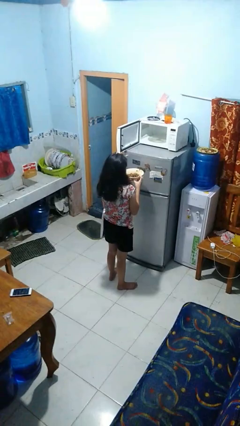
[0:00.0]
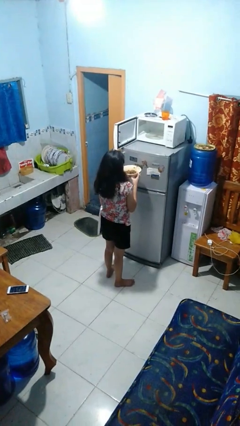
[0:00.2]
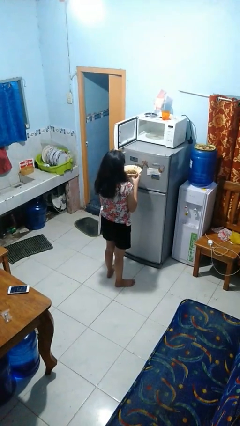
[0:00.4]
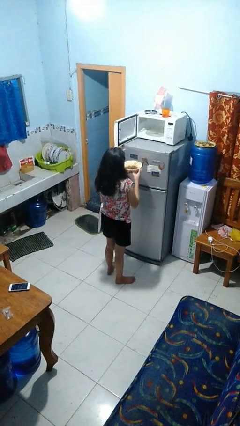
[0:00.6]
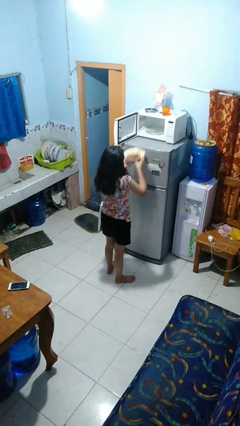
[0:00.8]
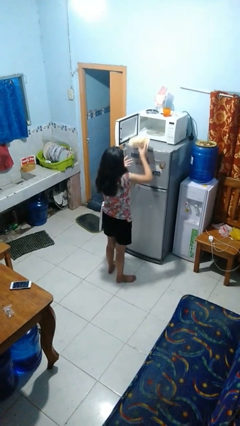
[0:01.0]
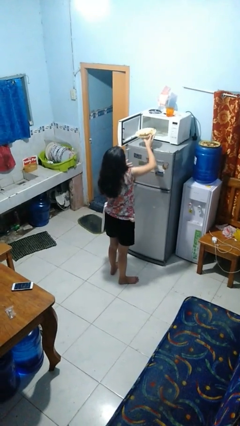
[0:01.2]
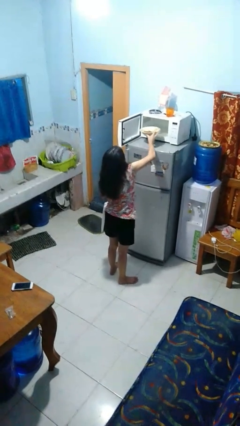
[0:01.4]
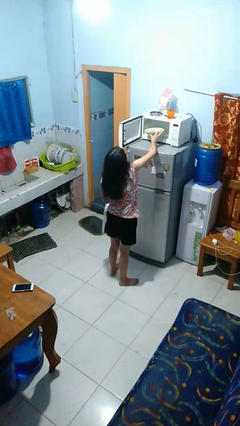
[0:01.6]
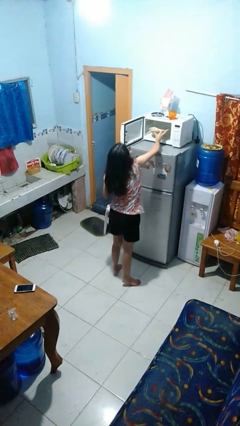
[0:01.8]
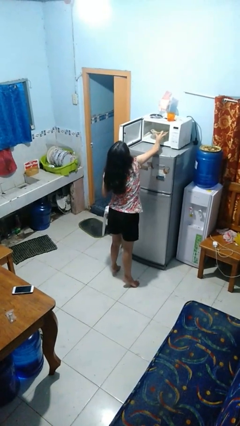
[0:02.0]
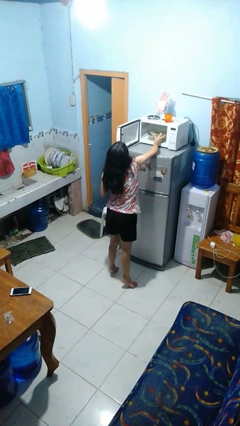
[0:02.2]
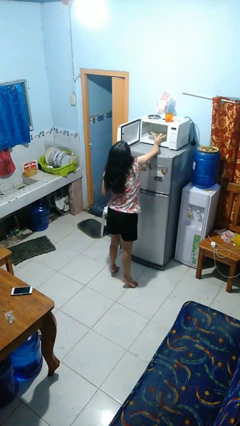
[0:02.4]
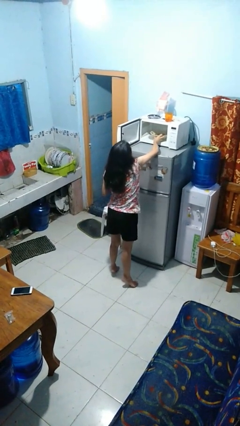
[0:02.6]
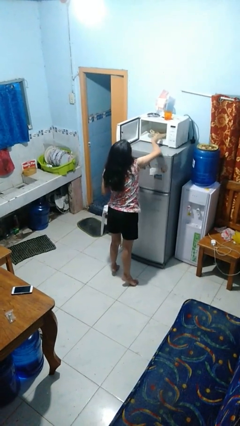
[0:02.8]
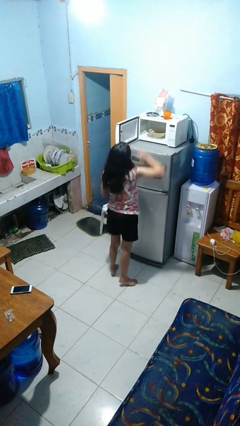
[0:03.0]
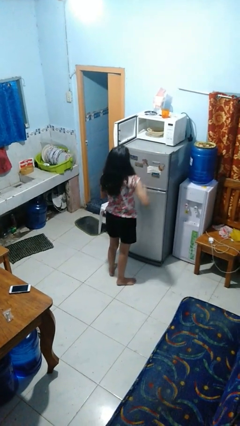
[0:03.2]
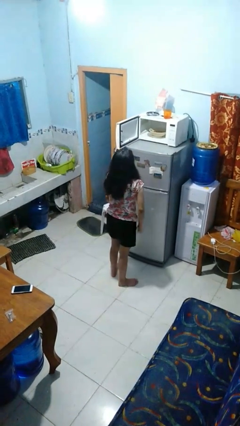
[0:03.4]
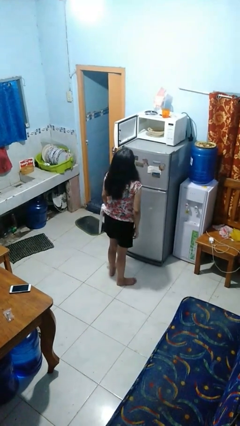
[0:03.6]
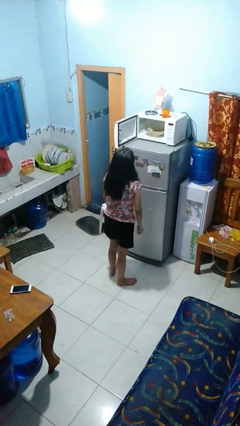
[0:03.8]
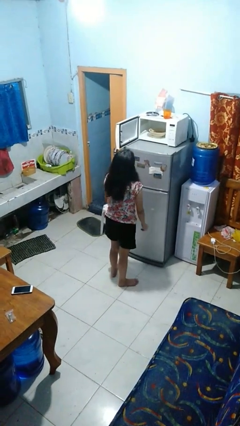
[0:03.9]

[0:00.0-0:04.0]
person puts object into microwave

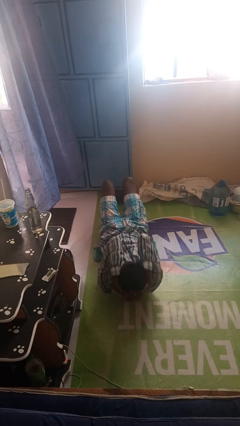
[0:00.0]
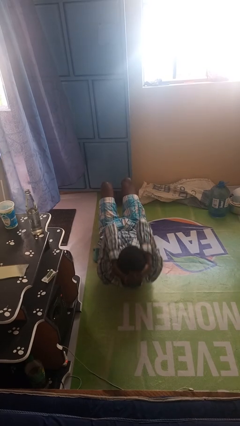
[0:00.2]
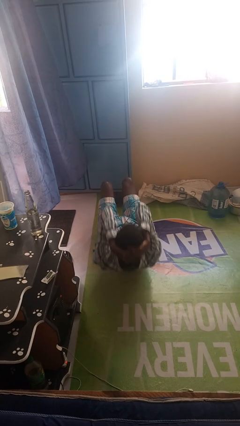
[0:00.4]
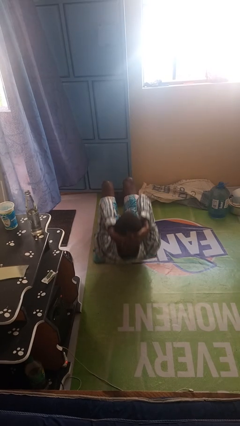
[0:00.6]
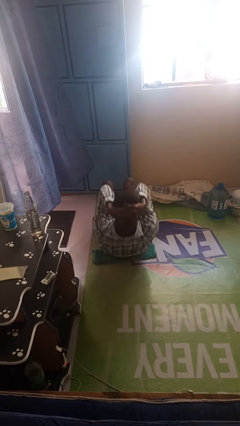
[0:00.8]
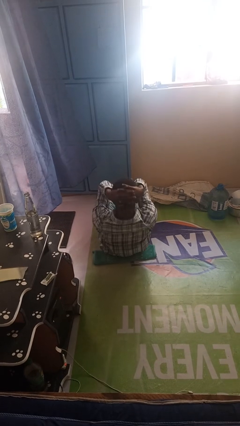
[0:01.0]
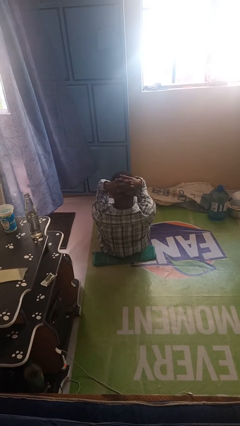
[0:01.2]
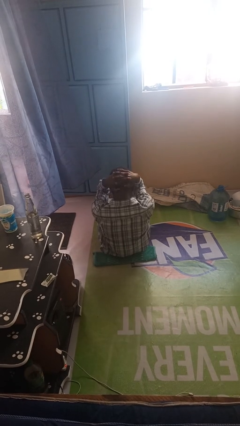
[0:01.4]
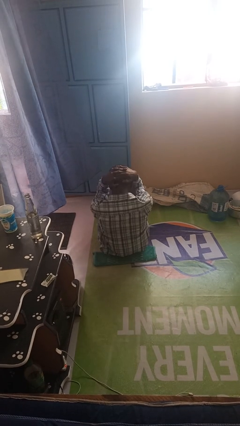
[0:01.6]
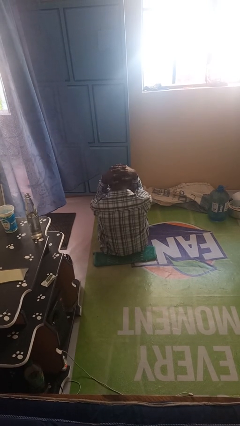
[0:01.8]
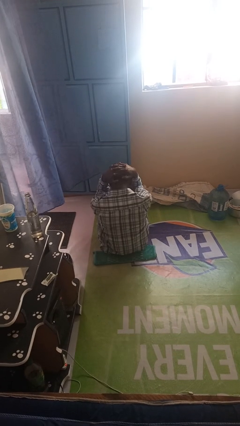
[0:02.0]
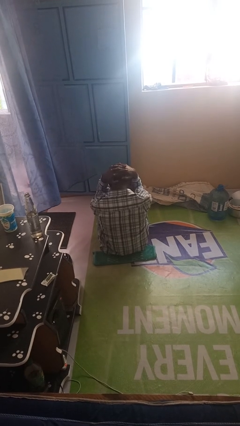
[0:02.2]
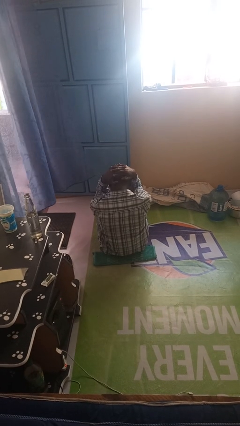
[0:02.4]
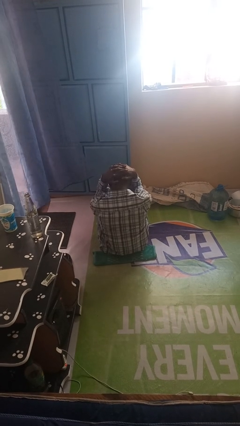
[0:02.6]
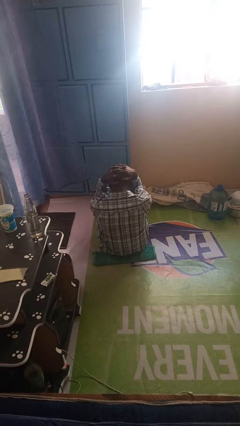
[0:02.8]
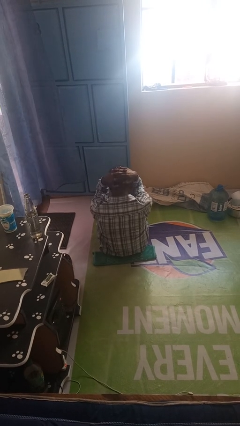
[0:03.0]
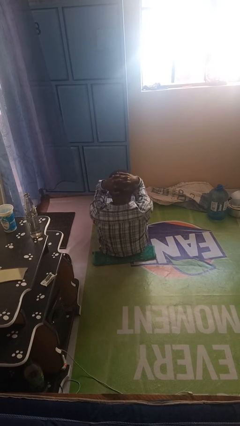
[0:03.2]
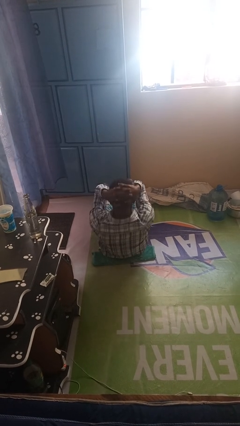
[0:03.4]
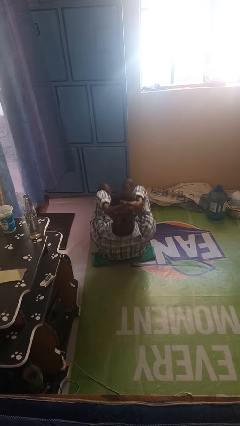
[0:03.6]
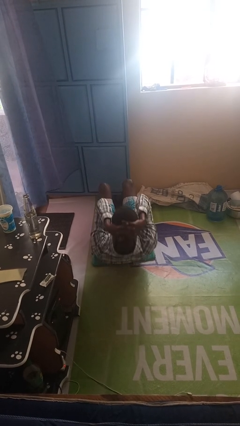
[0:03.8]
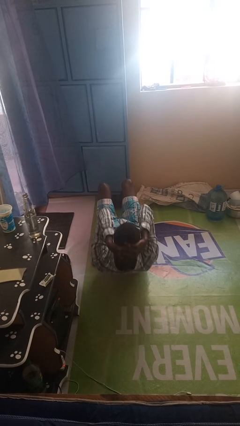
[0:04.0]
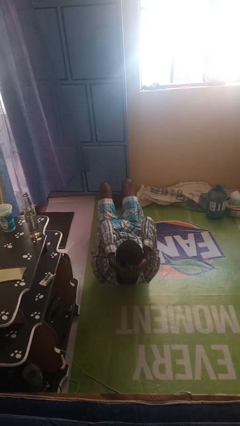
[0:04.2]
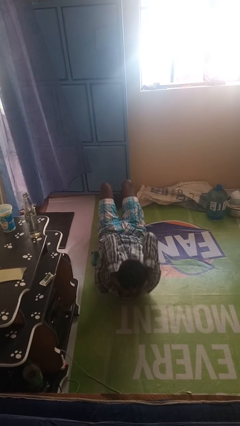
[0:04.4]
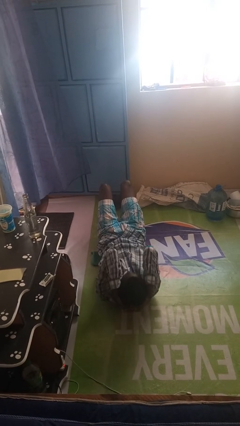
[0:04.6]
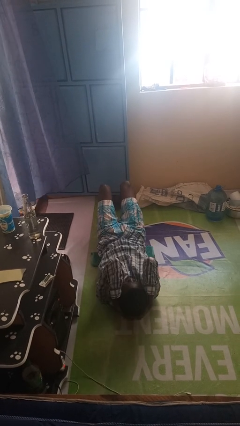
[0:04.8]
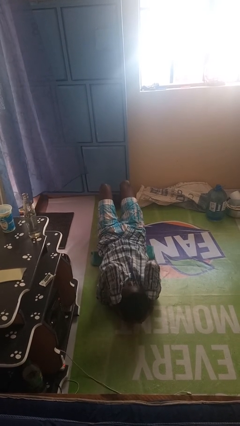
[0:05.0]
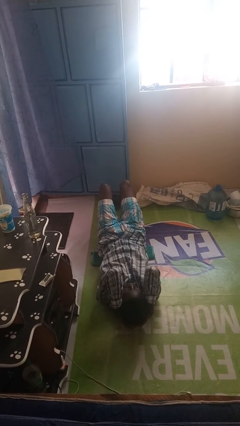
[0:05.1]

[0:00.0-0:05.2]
person exercises with situp

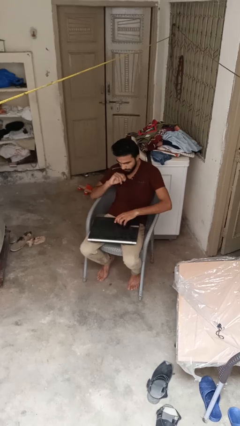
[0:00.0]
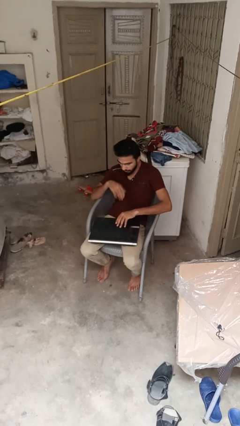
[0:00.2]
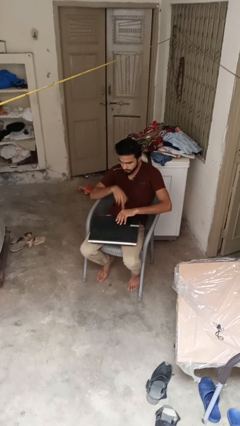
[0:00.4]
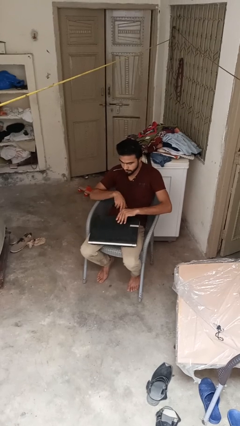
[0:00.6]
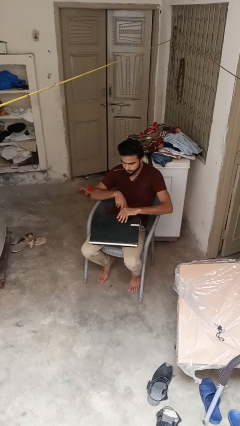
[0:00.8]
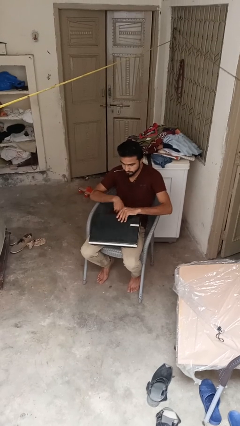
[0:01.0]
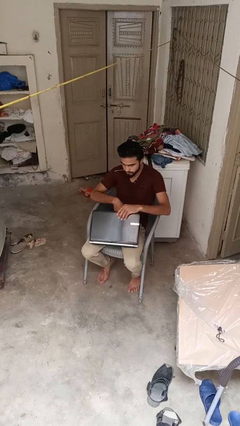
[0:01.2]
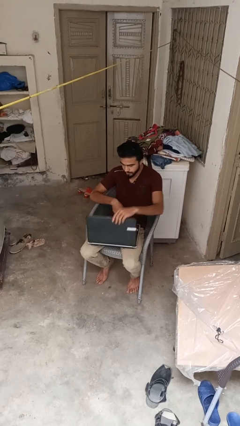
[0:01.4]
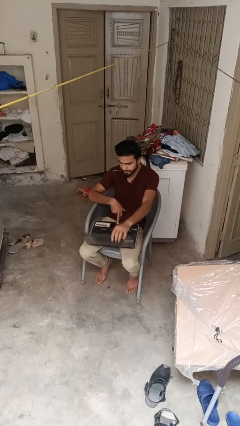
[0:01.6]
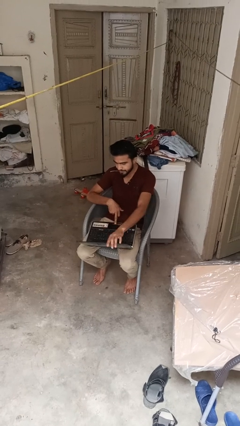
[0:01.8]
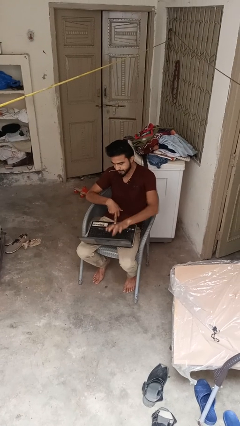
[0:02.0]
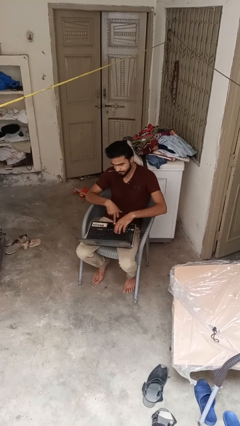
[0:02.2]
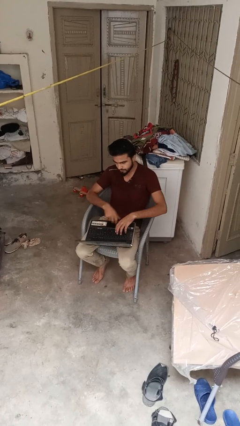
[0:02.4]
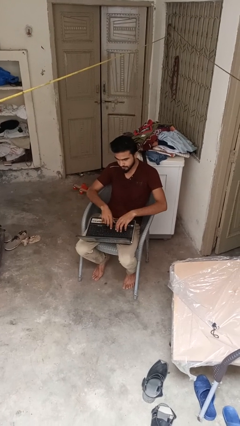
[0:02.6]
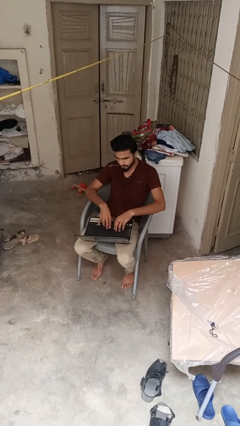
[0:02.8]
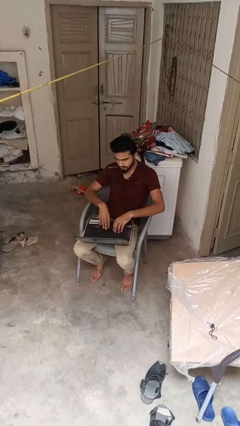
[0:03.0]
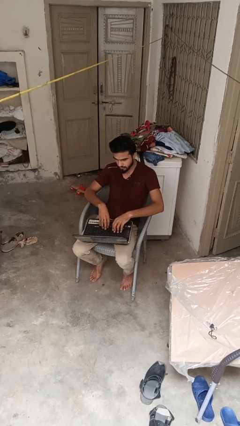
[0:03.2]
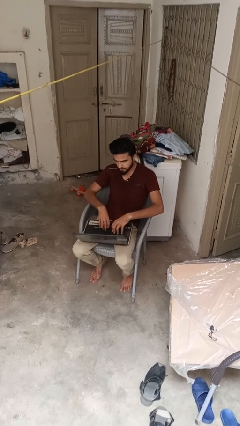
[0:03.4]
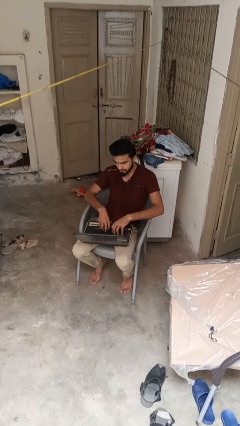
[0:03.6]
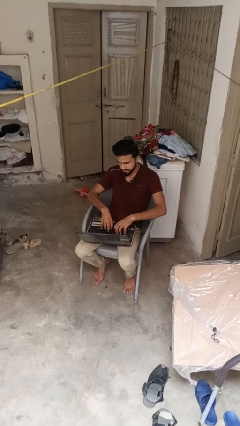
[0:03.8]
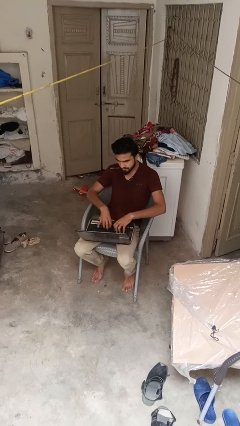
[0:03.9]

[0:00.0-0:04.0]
person opens laptop

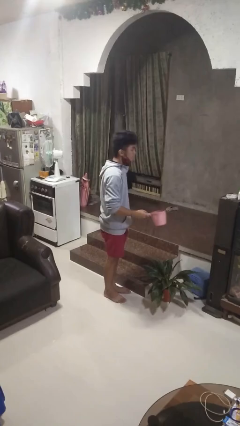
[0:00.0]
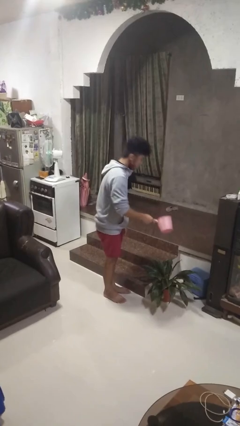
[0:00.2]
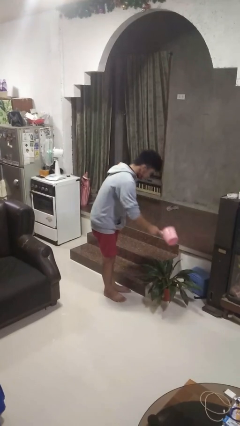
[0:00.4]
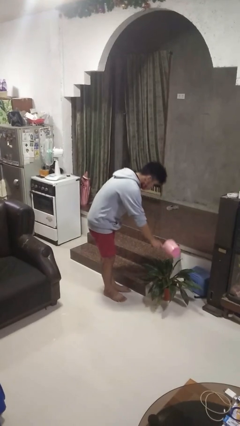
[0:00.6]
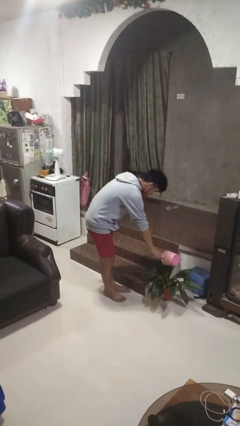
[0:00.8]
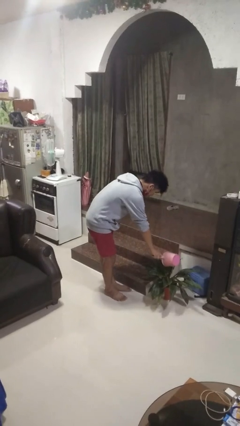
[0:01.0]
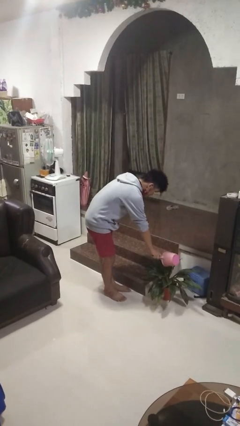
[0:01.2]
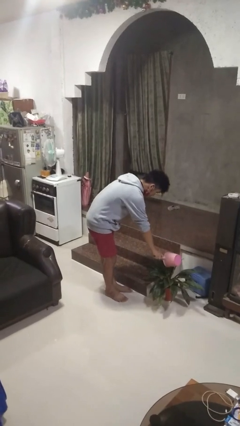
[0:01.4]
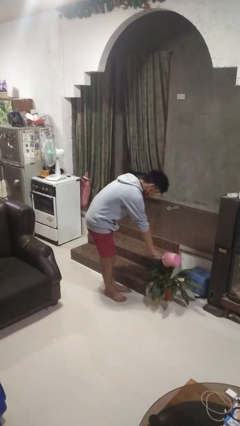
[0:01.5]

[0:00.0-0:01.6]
person waters houseplant

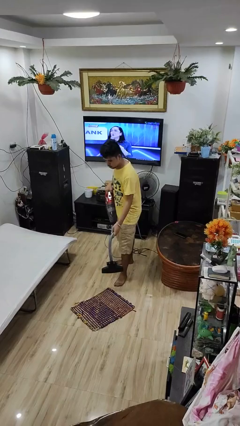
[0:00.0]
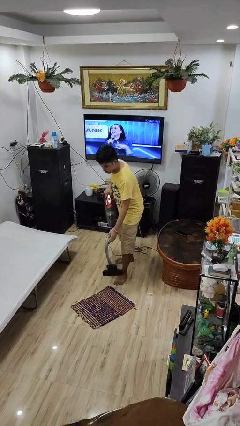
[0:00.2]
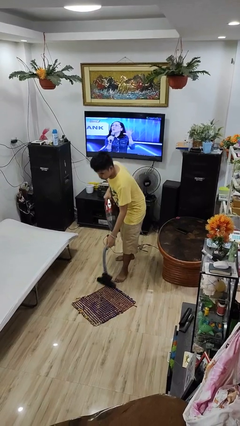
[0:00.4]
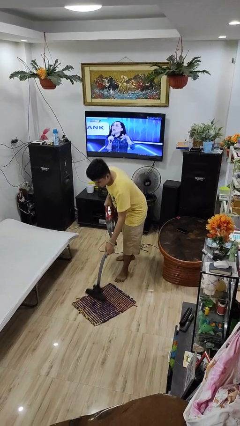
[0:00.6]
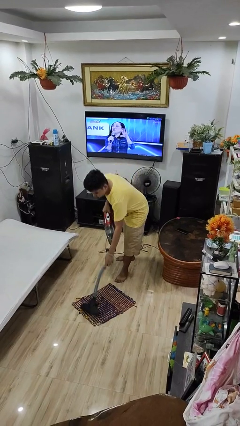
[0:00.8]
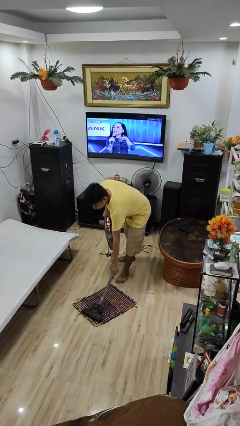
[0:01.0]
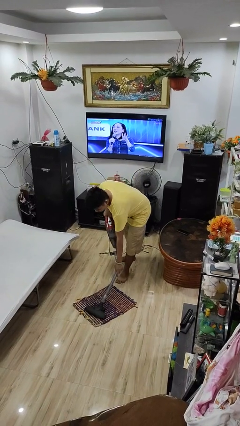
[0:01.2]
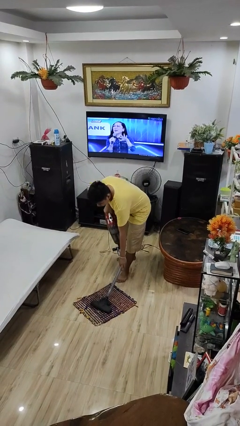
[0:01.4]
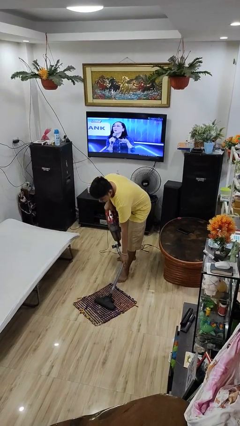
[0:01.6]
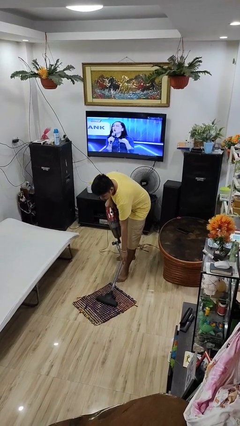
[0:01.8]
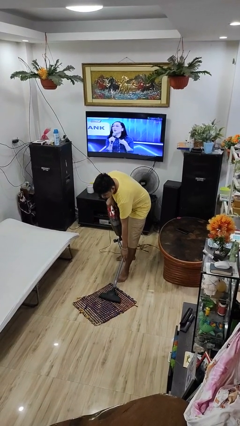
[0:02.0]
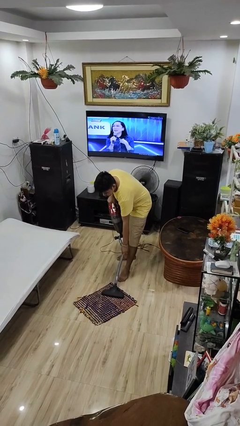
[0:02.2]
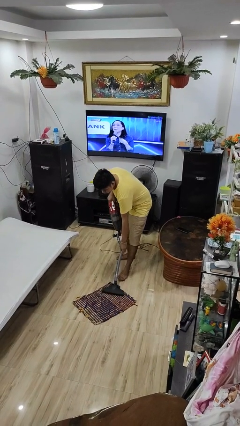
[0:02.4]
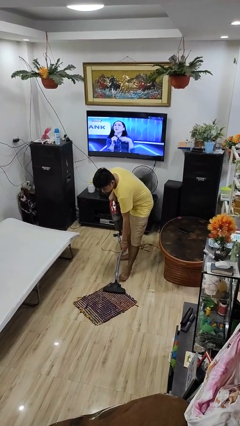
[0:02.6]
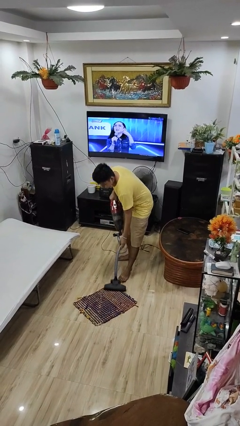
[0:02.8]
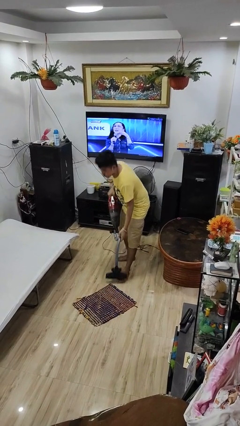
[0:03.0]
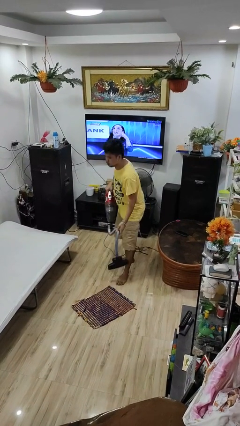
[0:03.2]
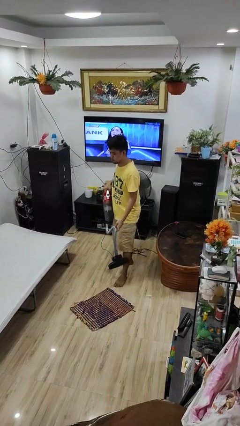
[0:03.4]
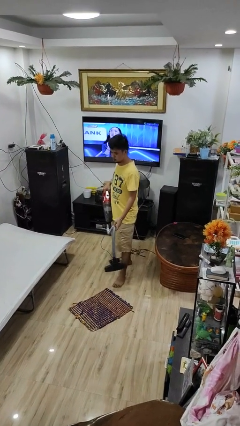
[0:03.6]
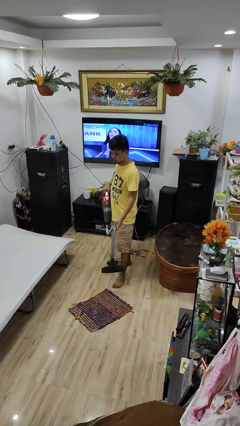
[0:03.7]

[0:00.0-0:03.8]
person vacuums carpet
